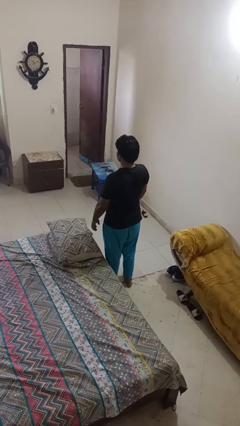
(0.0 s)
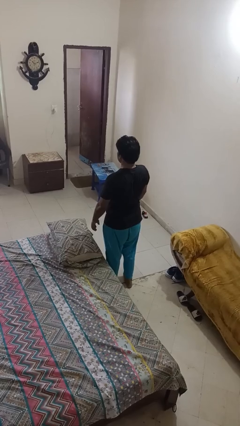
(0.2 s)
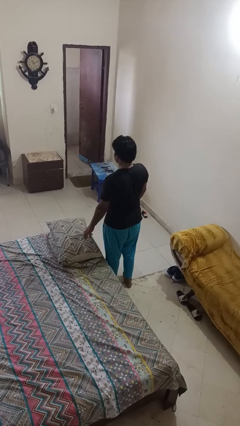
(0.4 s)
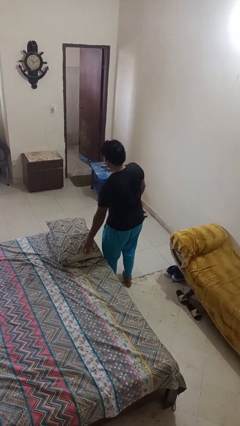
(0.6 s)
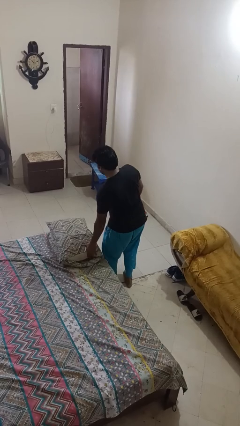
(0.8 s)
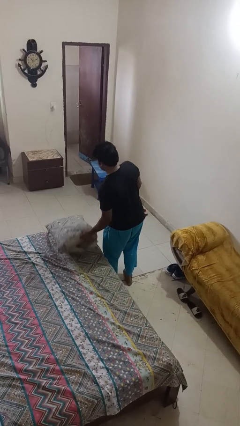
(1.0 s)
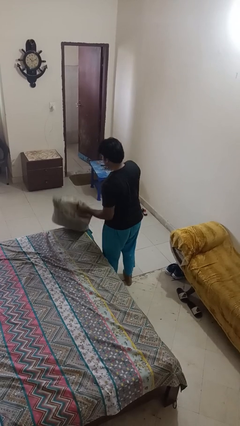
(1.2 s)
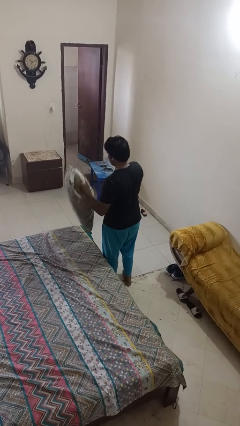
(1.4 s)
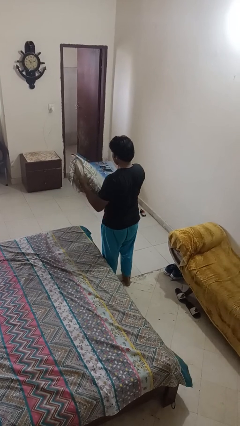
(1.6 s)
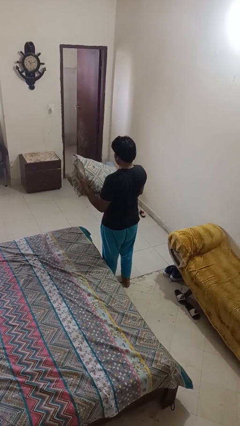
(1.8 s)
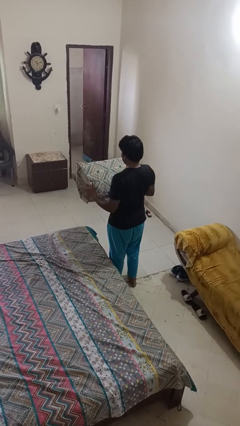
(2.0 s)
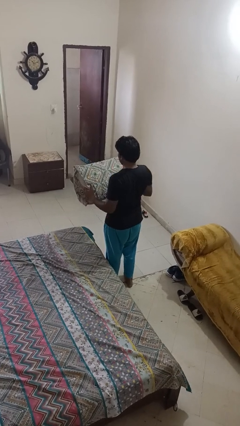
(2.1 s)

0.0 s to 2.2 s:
person picks up object from bed

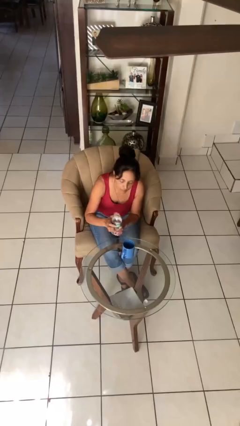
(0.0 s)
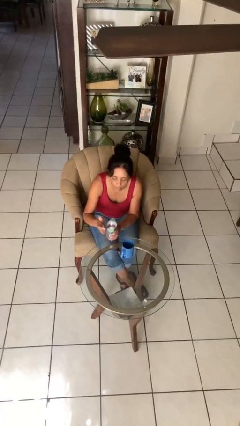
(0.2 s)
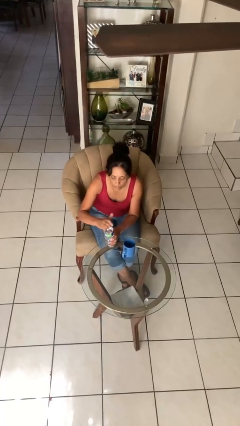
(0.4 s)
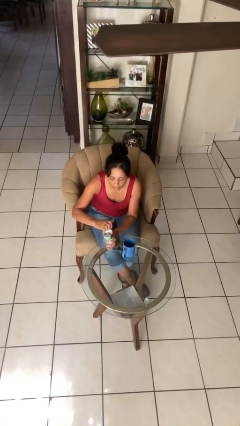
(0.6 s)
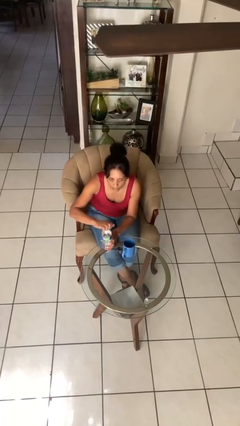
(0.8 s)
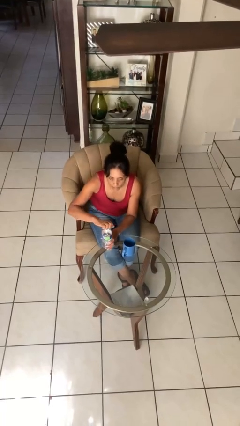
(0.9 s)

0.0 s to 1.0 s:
person screws lid to bottle

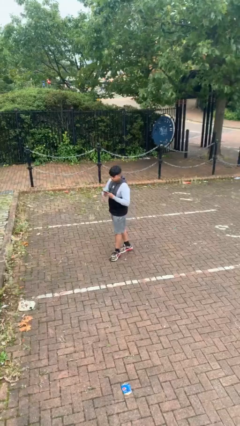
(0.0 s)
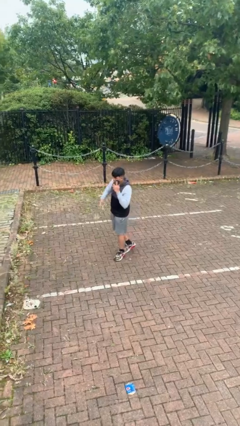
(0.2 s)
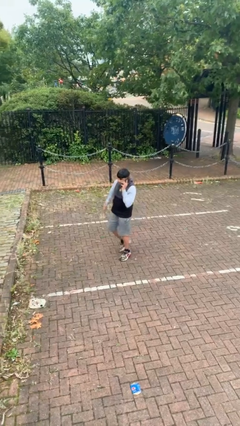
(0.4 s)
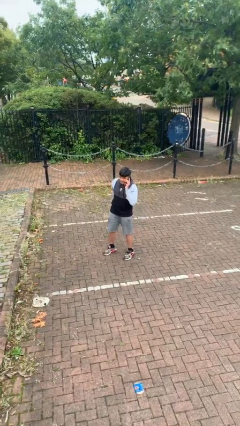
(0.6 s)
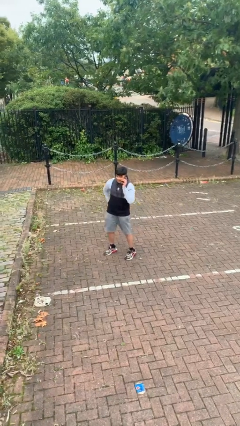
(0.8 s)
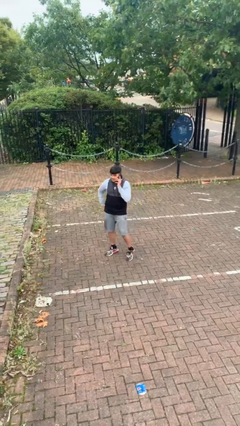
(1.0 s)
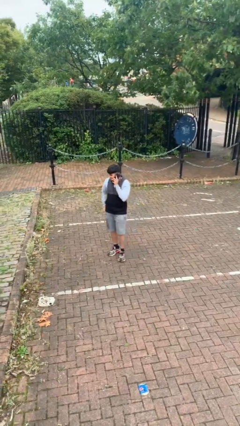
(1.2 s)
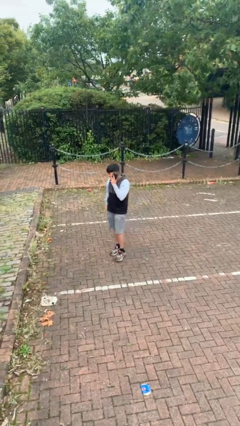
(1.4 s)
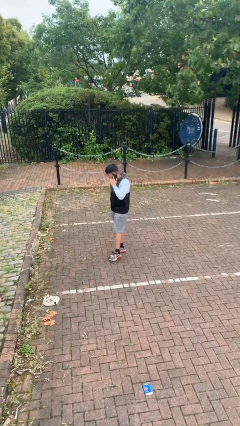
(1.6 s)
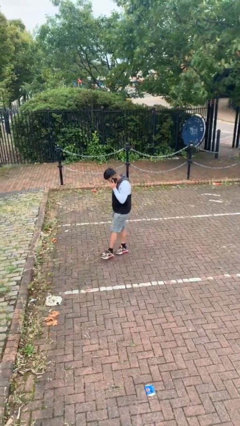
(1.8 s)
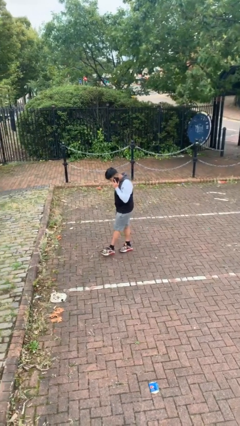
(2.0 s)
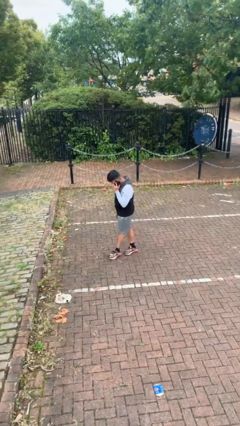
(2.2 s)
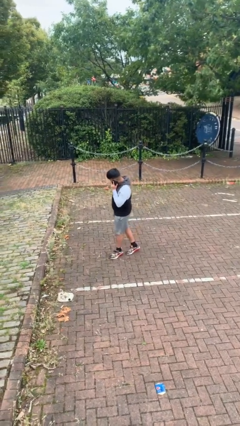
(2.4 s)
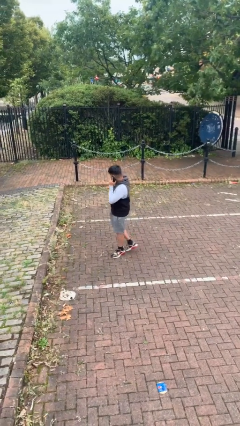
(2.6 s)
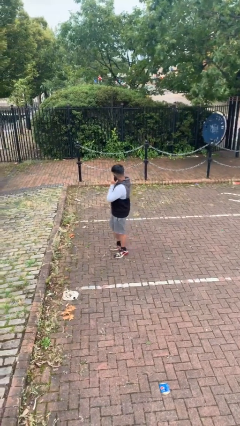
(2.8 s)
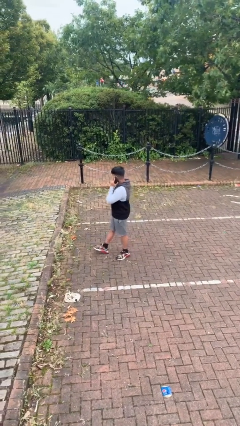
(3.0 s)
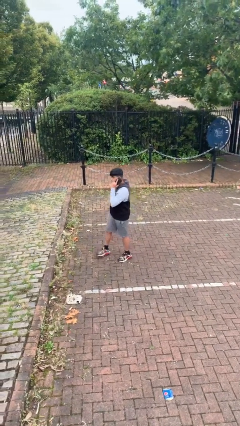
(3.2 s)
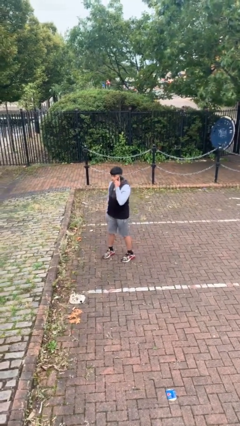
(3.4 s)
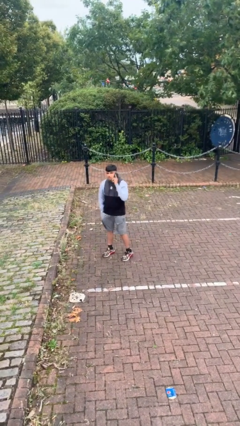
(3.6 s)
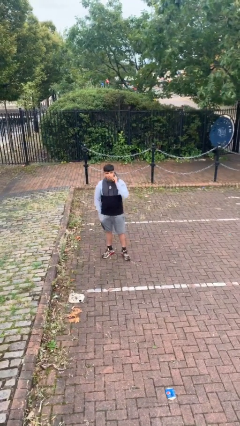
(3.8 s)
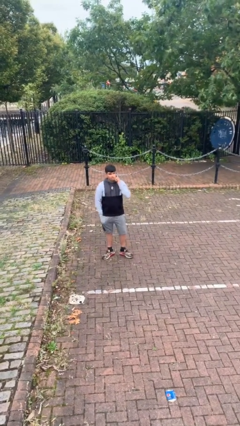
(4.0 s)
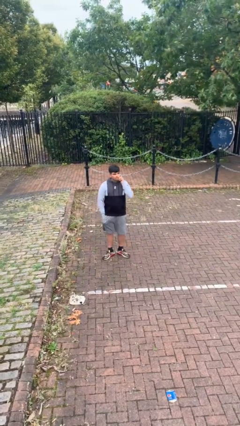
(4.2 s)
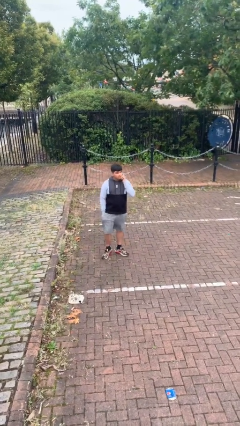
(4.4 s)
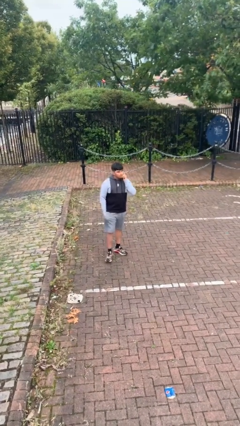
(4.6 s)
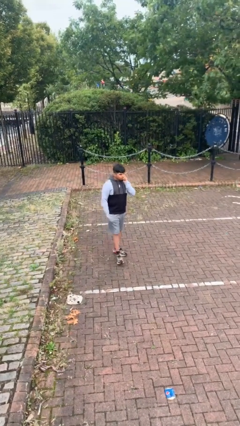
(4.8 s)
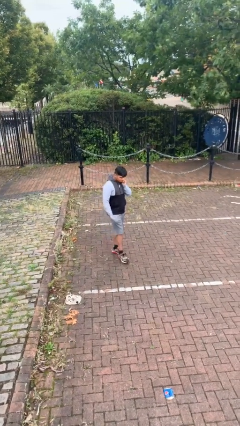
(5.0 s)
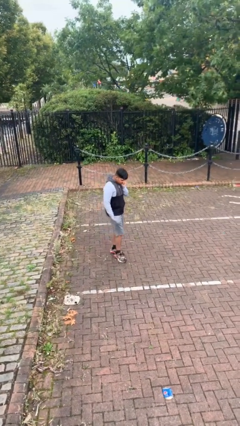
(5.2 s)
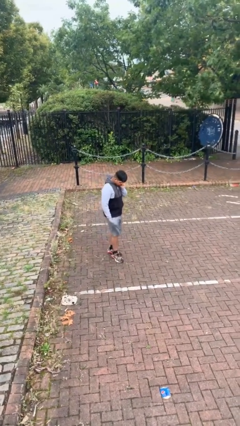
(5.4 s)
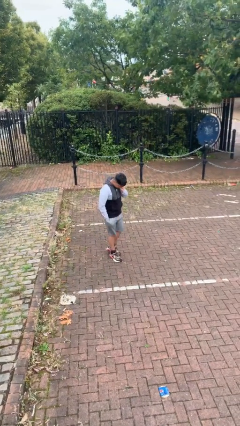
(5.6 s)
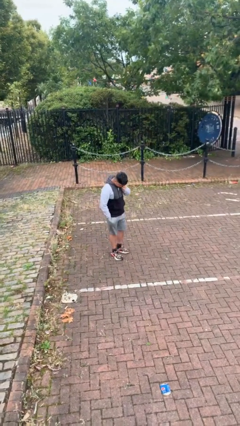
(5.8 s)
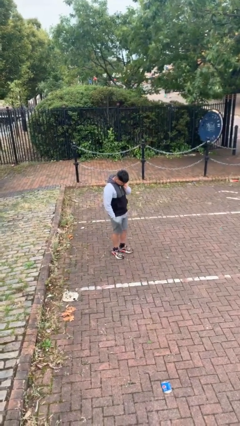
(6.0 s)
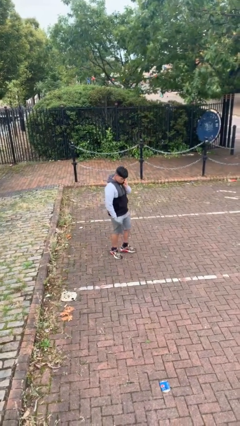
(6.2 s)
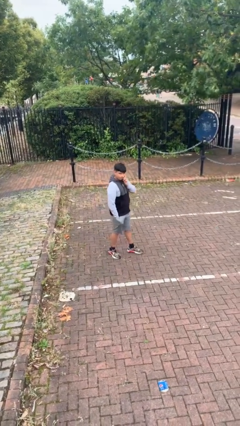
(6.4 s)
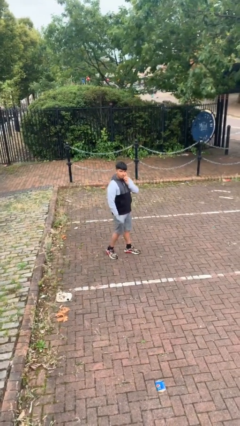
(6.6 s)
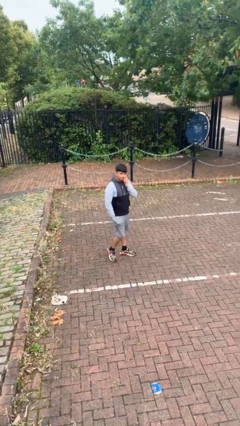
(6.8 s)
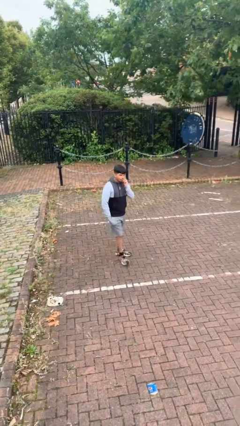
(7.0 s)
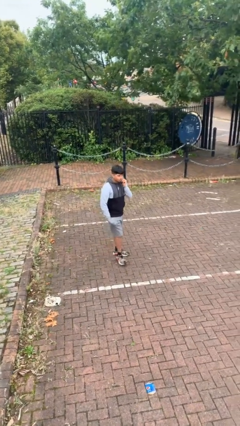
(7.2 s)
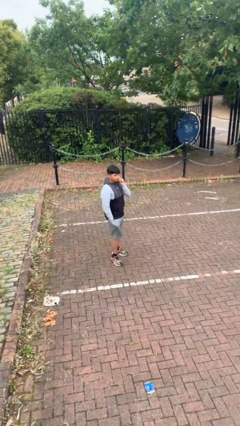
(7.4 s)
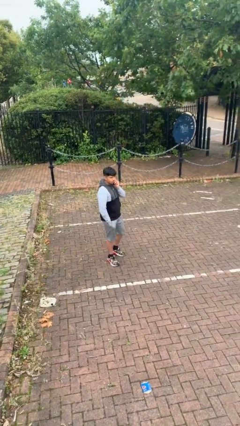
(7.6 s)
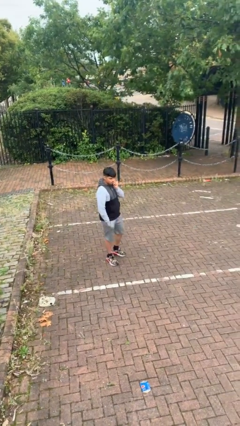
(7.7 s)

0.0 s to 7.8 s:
person talks on phone

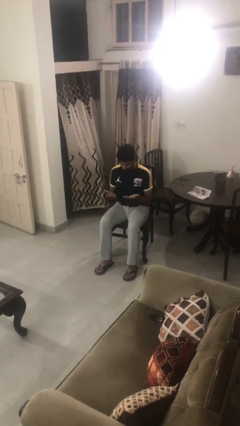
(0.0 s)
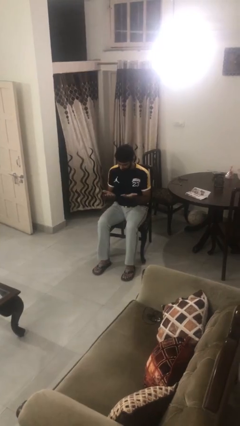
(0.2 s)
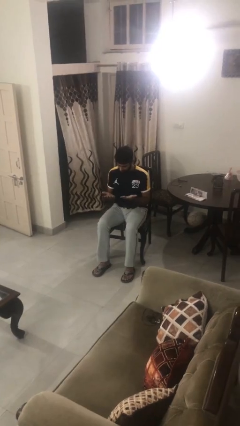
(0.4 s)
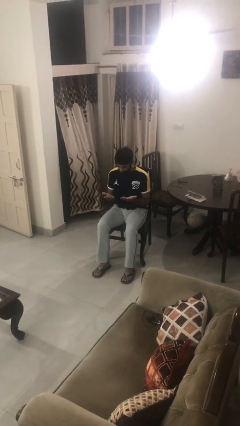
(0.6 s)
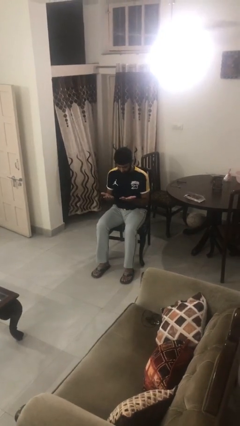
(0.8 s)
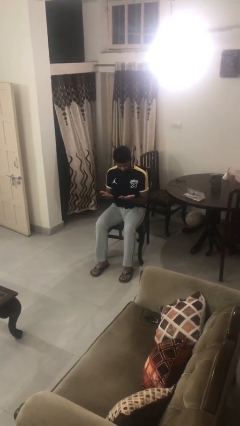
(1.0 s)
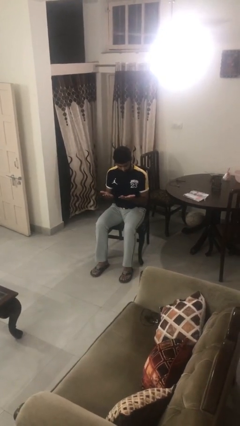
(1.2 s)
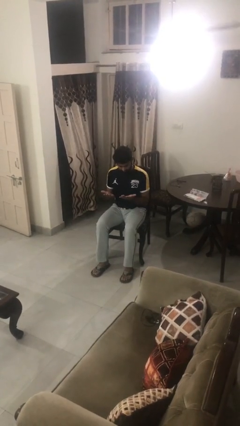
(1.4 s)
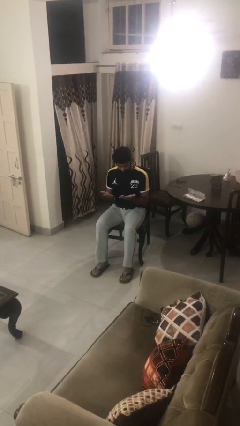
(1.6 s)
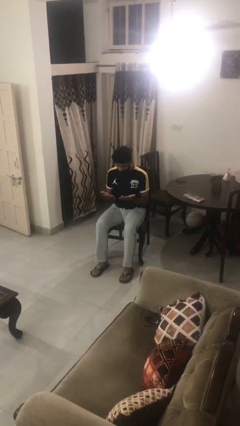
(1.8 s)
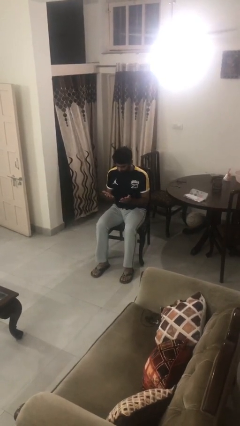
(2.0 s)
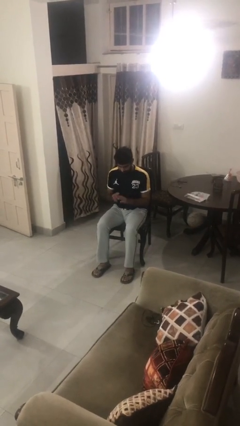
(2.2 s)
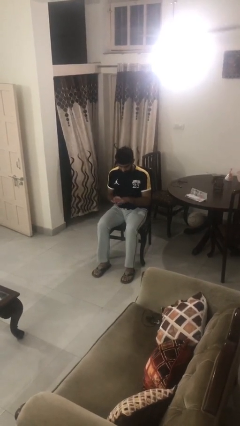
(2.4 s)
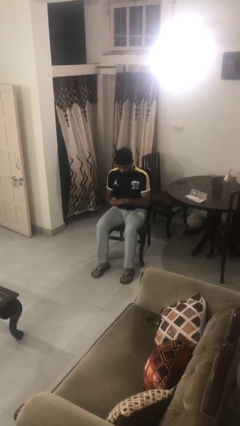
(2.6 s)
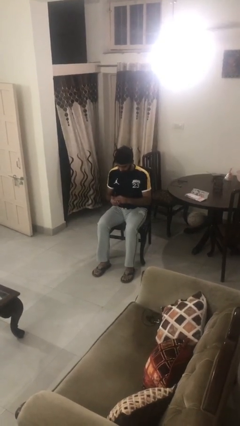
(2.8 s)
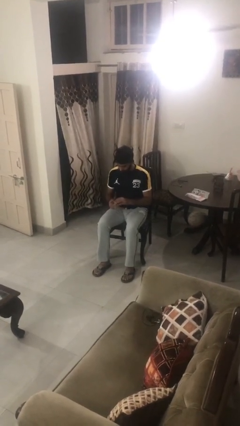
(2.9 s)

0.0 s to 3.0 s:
person looks at hands in lap

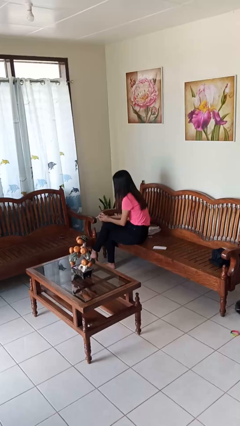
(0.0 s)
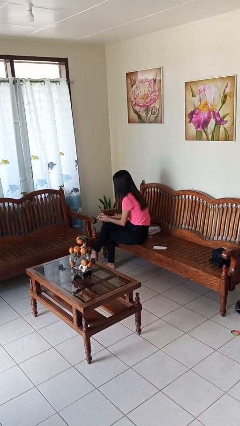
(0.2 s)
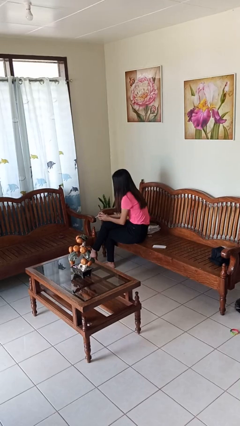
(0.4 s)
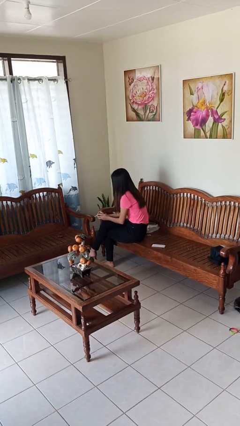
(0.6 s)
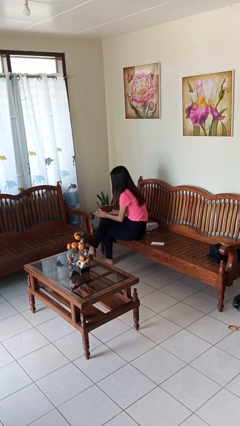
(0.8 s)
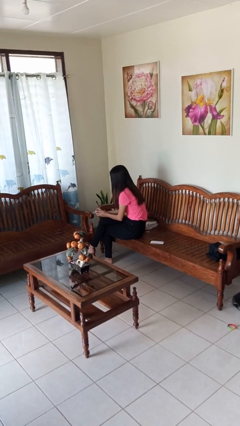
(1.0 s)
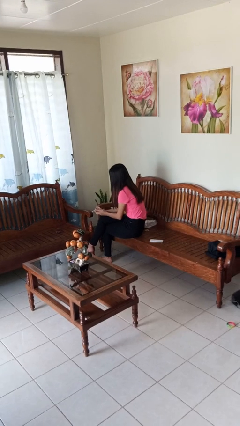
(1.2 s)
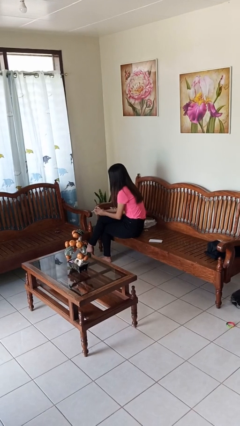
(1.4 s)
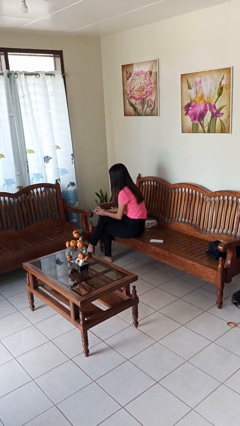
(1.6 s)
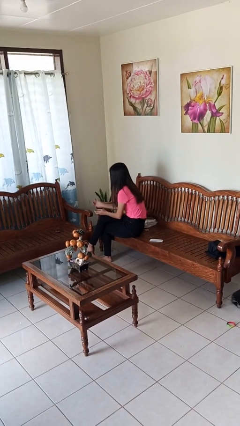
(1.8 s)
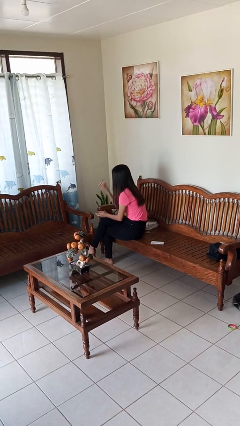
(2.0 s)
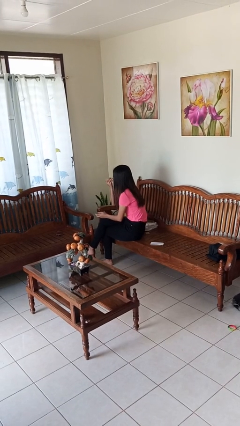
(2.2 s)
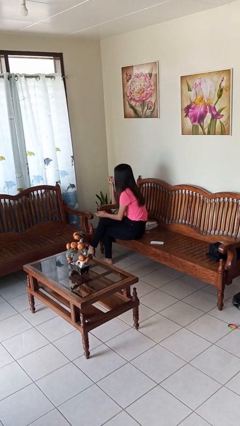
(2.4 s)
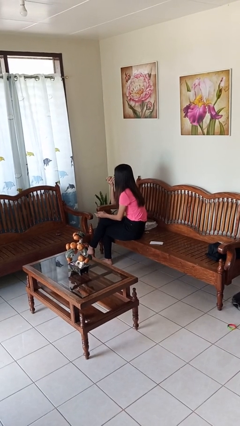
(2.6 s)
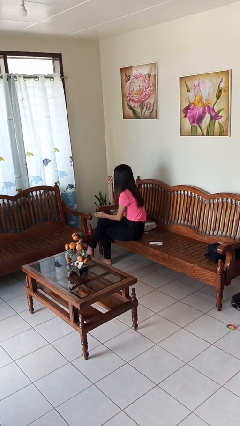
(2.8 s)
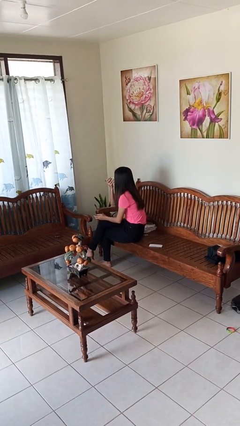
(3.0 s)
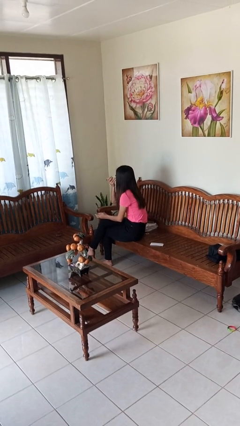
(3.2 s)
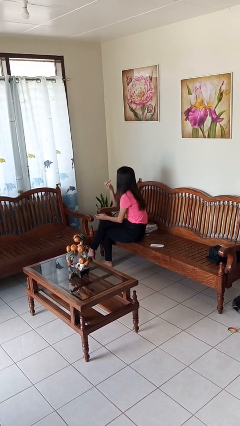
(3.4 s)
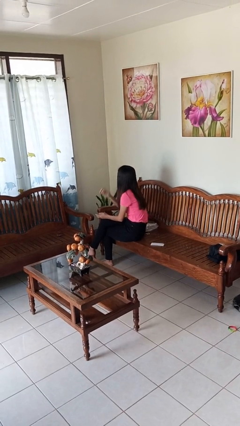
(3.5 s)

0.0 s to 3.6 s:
person applies eye makeup

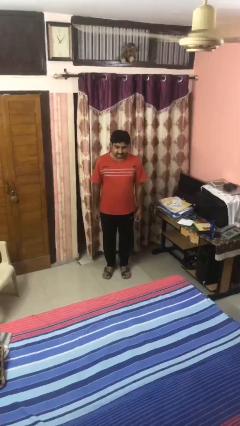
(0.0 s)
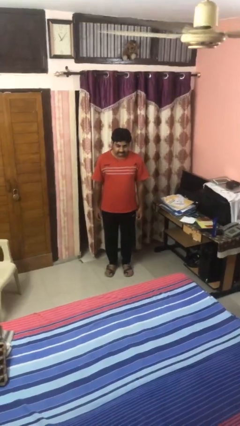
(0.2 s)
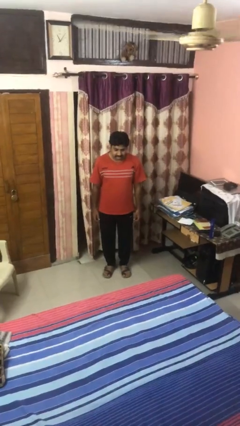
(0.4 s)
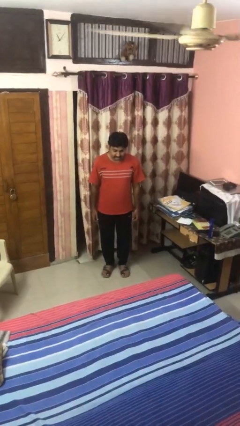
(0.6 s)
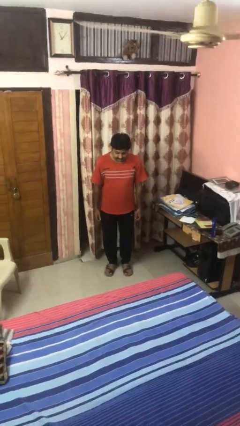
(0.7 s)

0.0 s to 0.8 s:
person stands up
